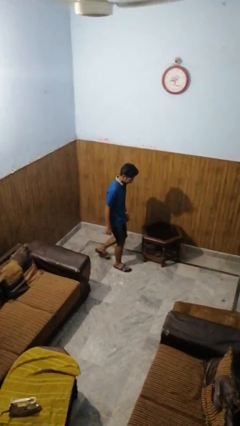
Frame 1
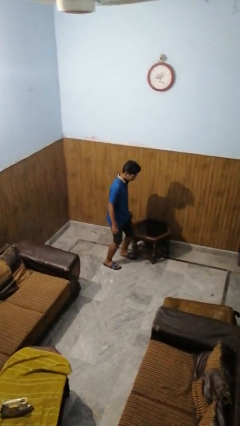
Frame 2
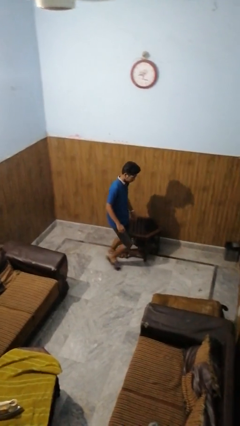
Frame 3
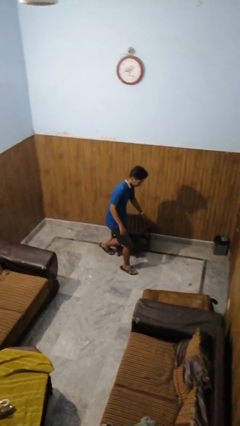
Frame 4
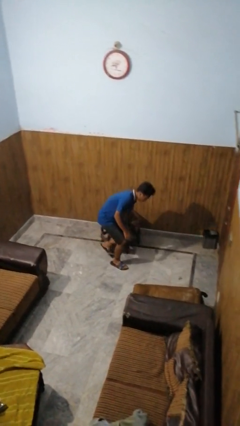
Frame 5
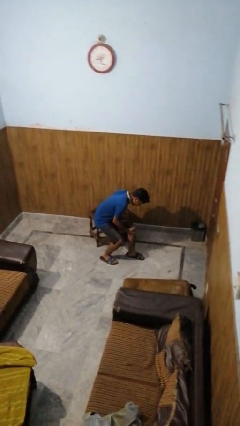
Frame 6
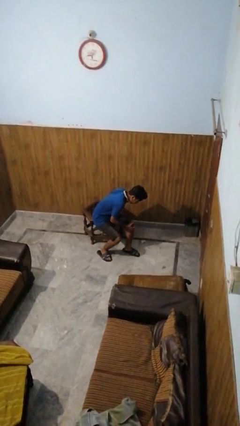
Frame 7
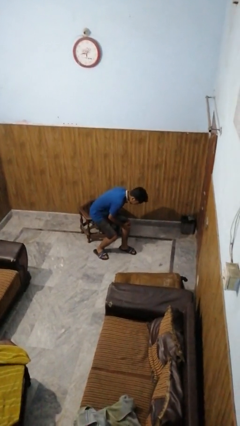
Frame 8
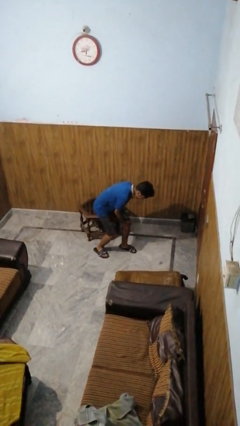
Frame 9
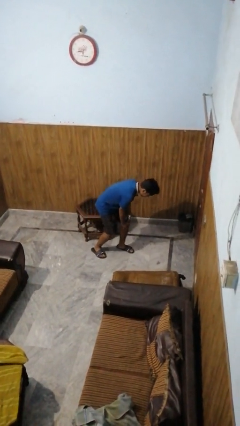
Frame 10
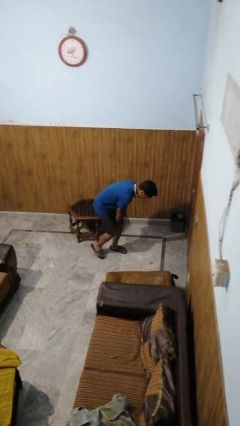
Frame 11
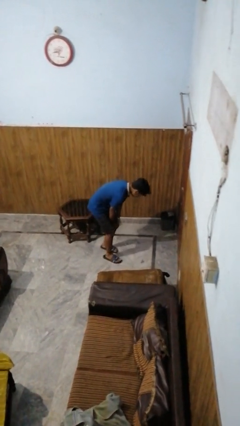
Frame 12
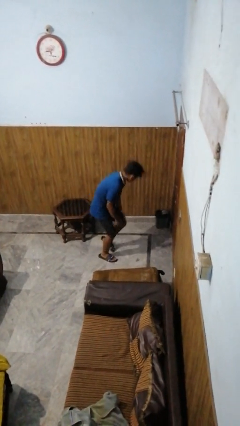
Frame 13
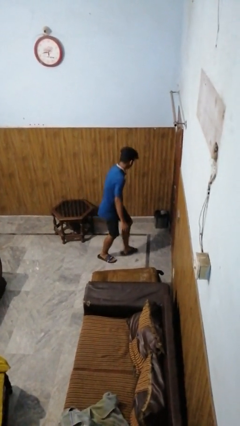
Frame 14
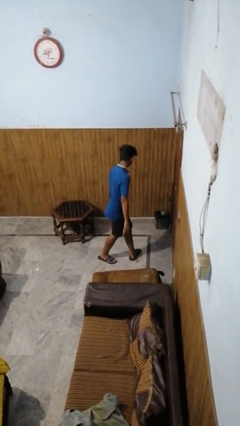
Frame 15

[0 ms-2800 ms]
person bumps into table

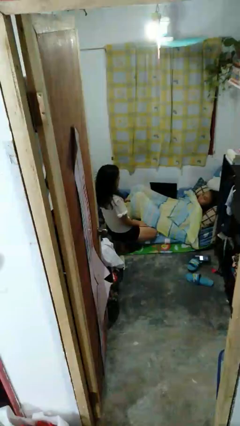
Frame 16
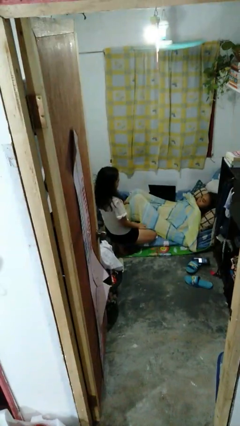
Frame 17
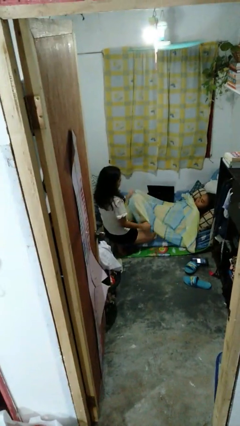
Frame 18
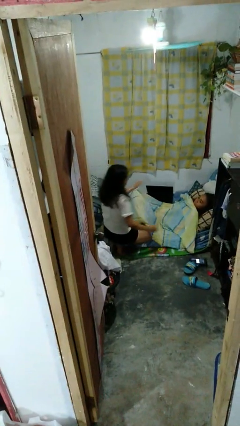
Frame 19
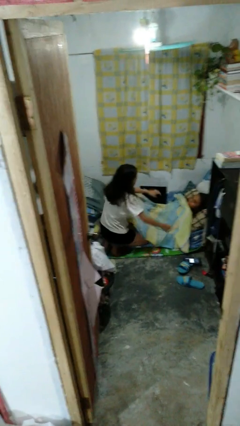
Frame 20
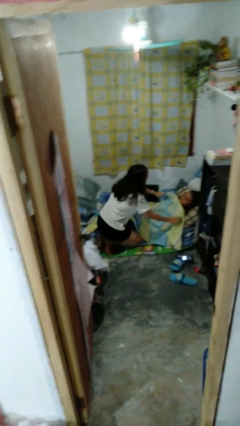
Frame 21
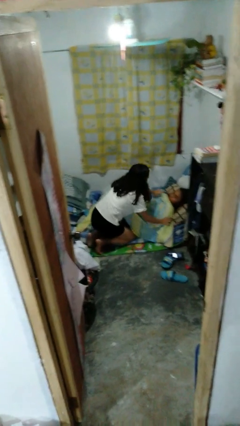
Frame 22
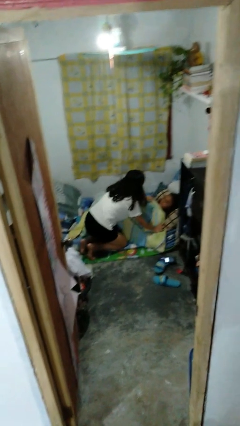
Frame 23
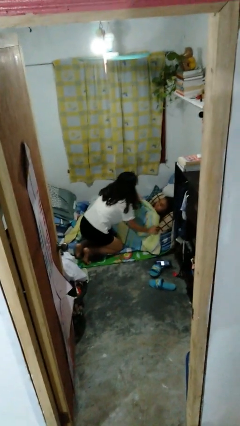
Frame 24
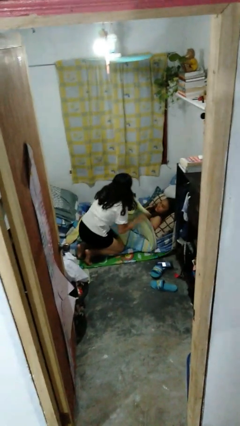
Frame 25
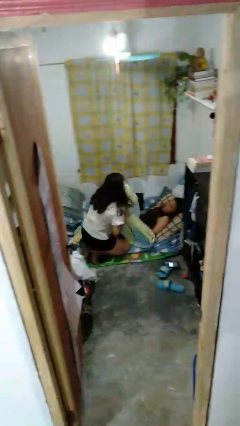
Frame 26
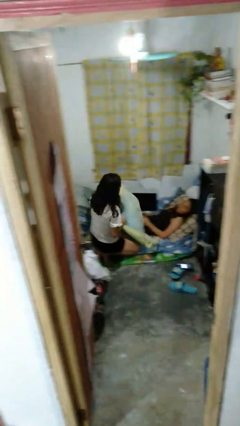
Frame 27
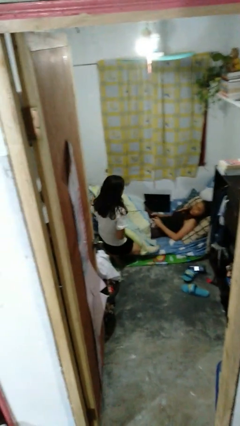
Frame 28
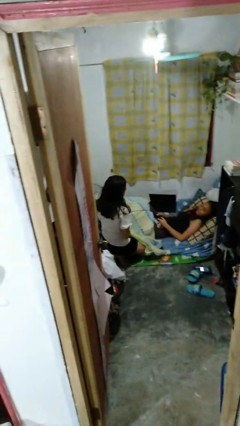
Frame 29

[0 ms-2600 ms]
person uncovers friend with blanket

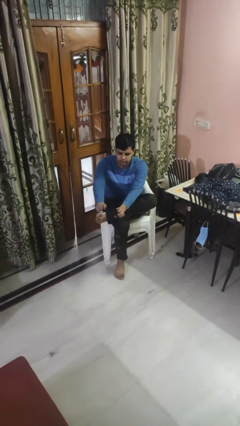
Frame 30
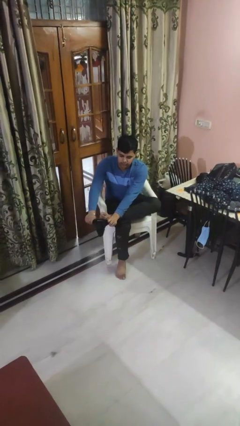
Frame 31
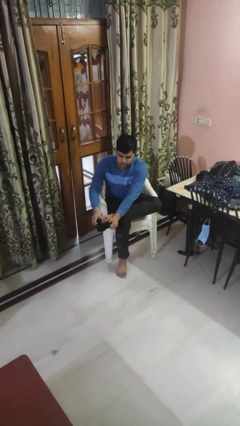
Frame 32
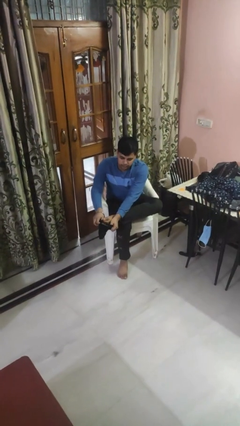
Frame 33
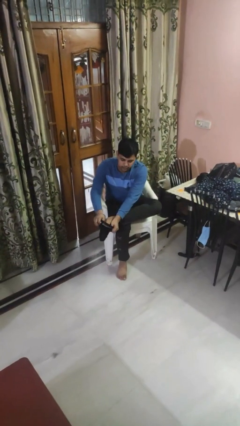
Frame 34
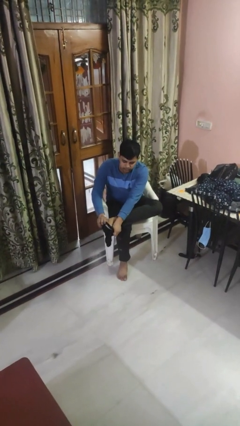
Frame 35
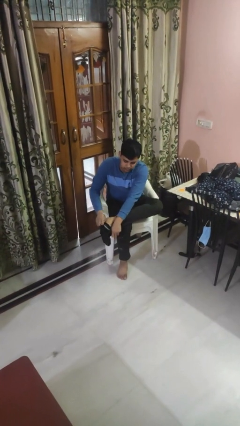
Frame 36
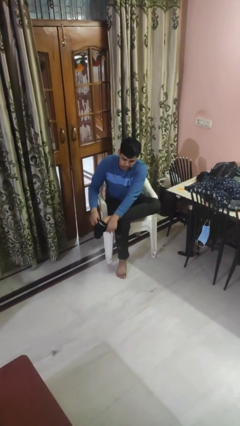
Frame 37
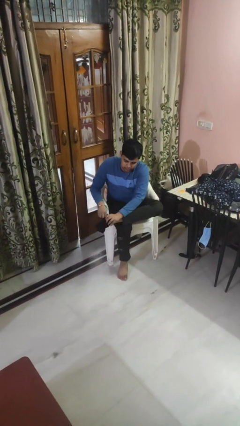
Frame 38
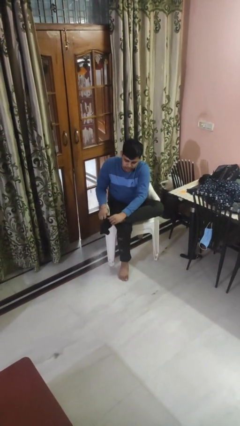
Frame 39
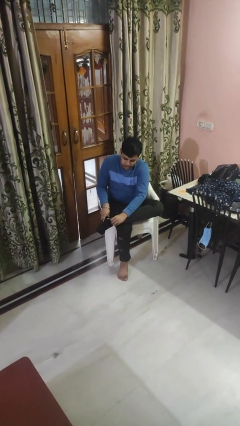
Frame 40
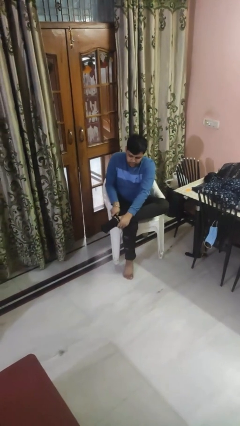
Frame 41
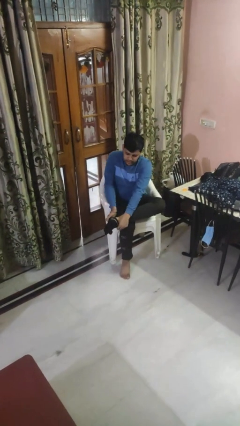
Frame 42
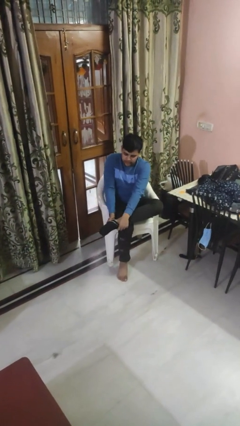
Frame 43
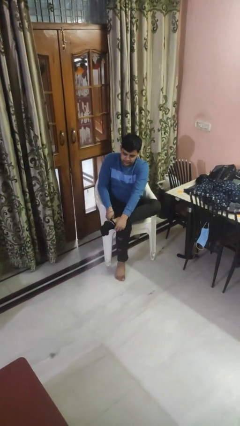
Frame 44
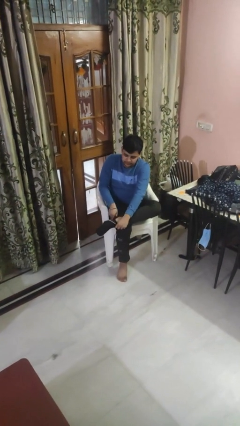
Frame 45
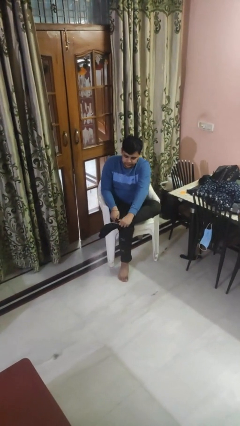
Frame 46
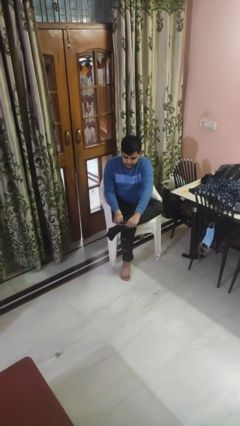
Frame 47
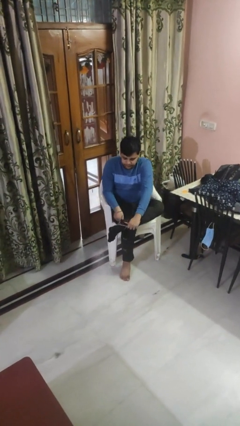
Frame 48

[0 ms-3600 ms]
person puts on socks

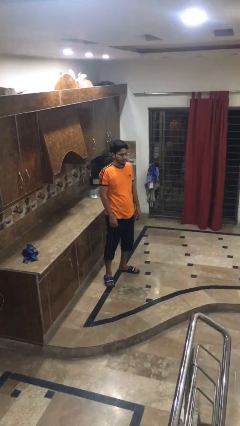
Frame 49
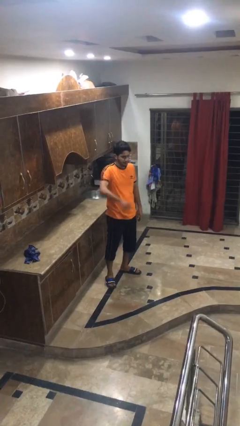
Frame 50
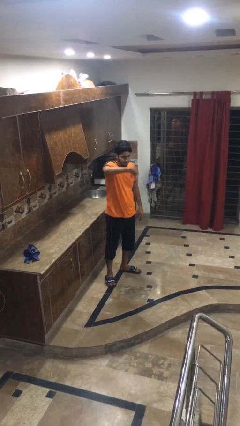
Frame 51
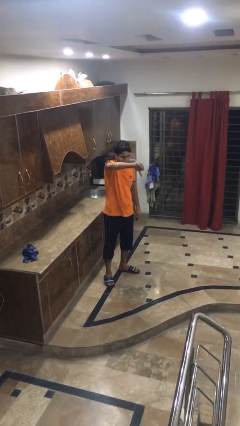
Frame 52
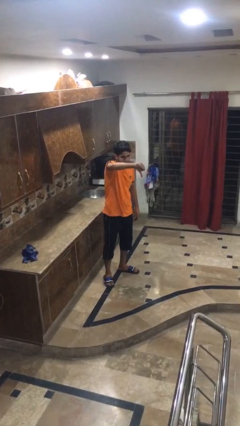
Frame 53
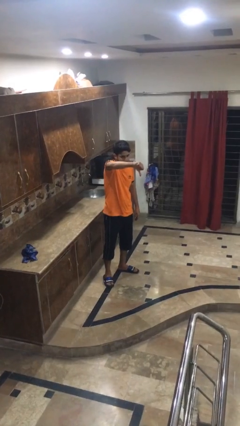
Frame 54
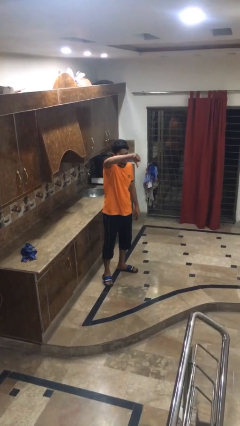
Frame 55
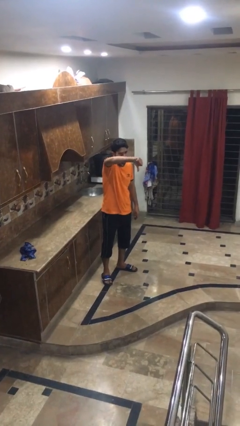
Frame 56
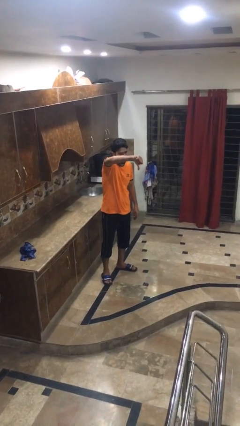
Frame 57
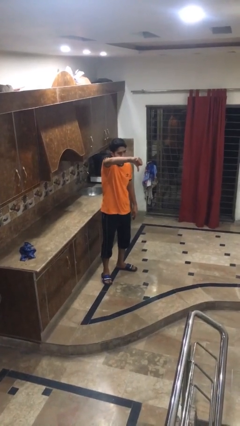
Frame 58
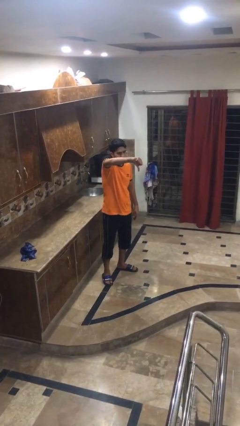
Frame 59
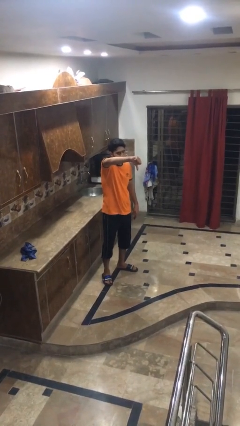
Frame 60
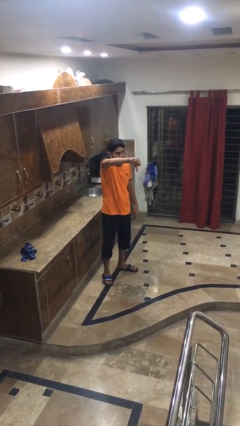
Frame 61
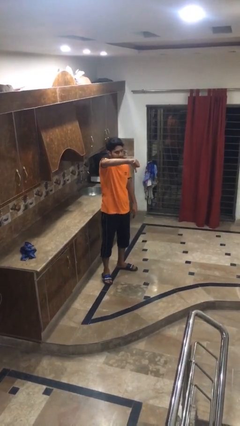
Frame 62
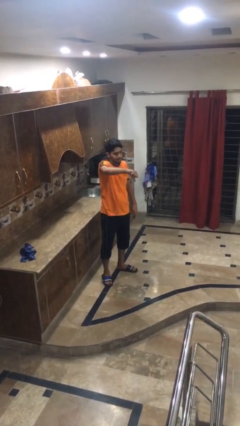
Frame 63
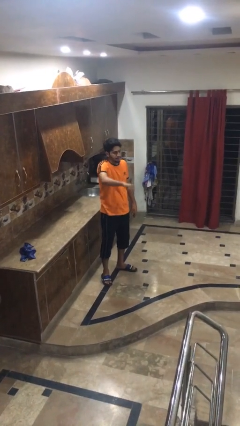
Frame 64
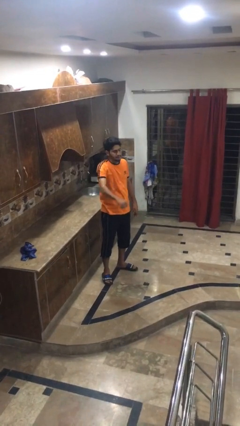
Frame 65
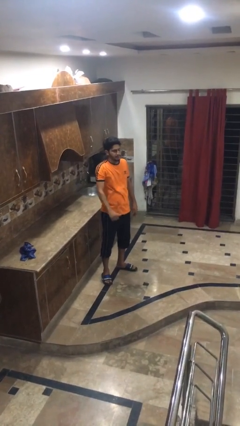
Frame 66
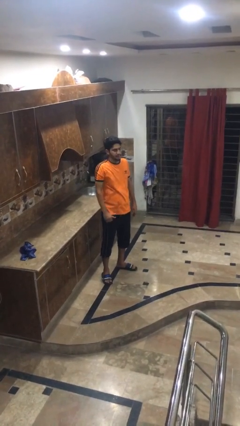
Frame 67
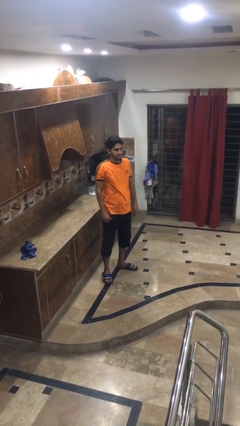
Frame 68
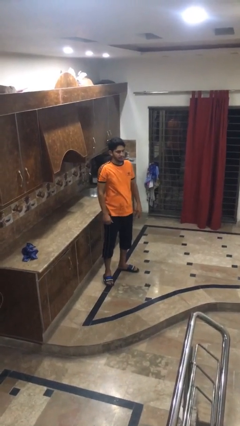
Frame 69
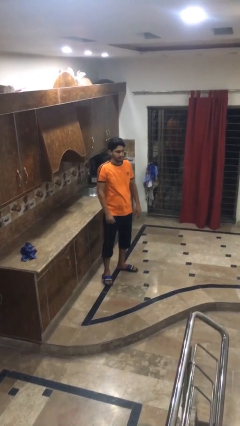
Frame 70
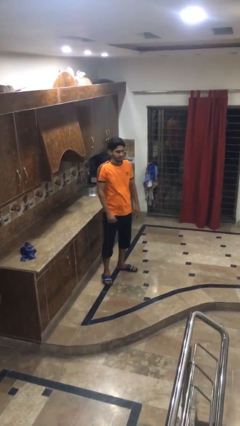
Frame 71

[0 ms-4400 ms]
person gestures thumbs down

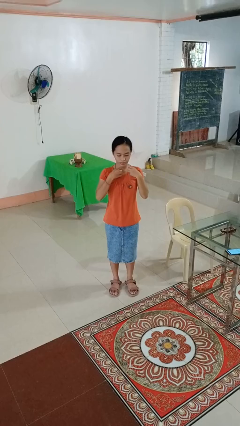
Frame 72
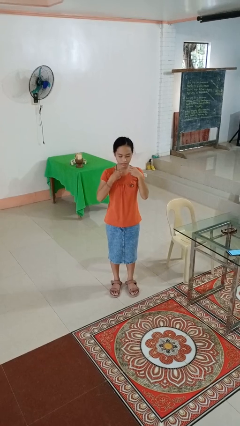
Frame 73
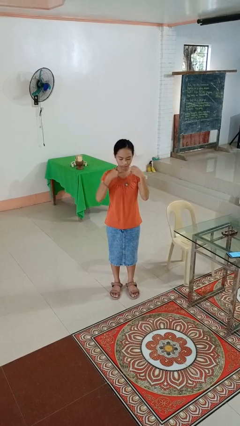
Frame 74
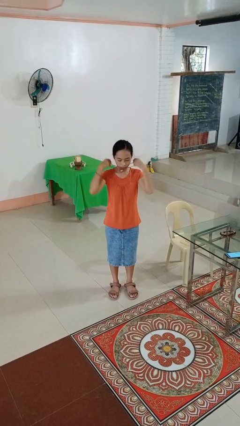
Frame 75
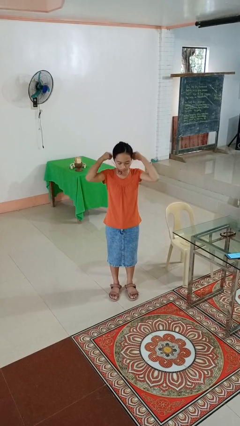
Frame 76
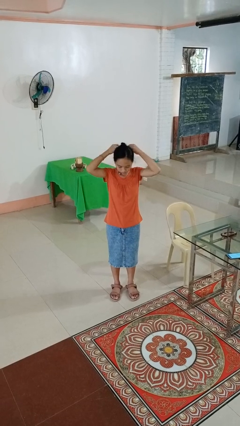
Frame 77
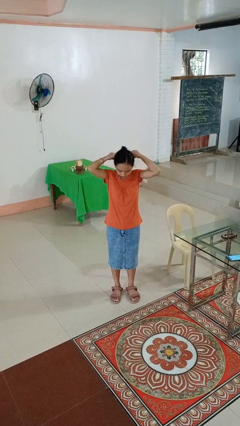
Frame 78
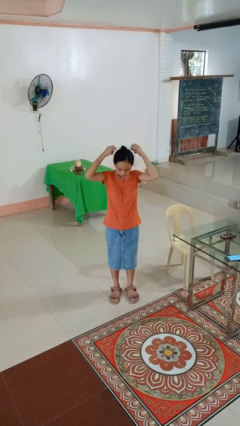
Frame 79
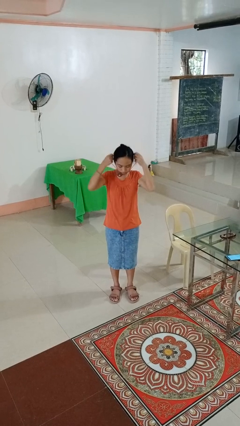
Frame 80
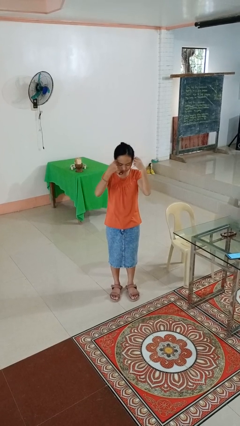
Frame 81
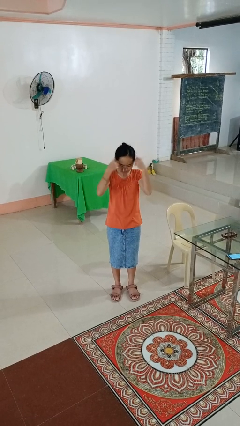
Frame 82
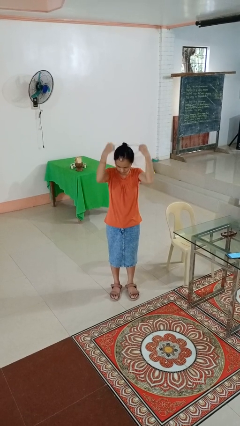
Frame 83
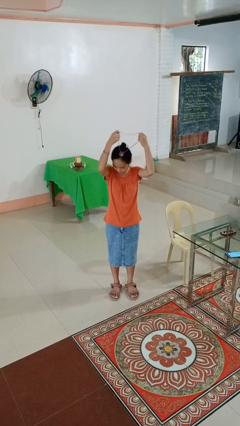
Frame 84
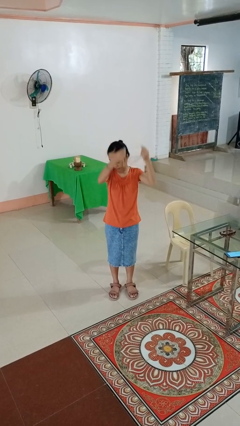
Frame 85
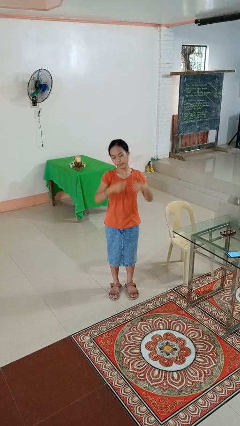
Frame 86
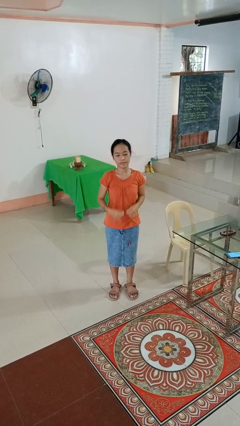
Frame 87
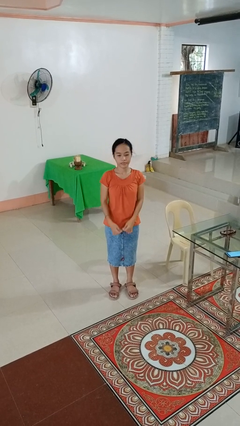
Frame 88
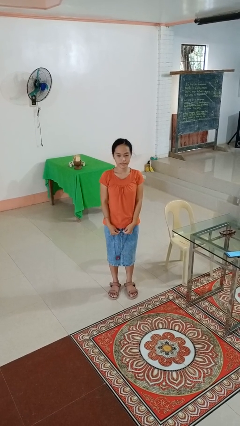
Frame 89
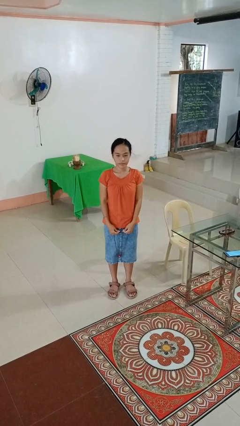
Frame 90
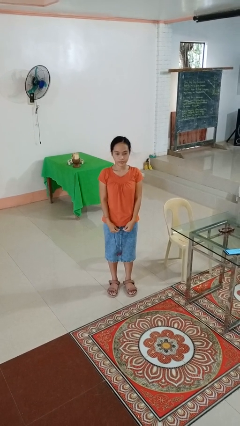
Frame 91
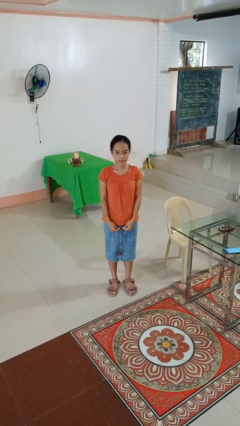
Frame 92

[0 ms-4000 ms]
person takes off necklace

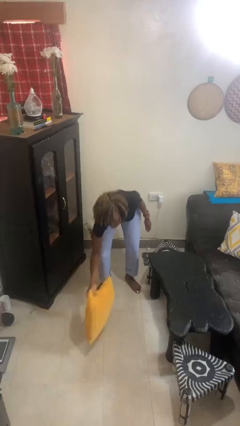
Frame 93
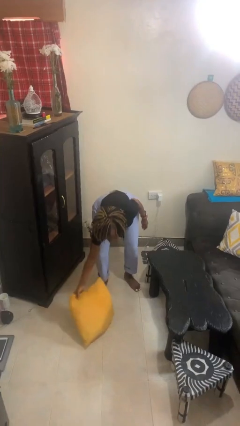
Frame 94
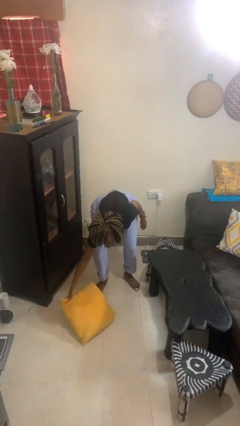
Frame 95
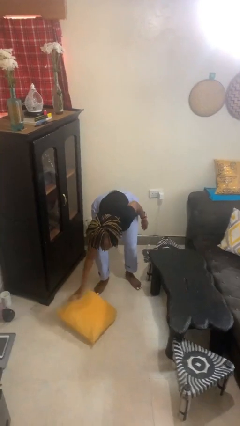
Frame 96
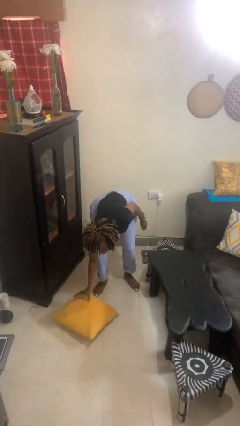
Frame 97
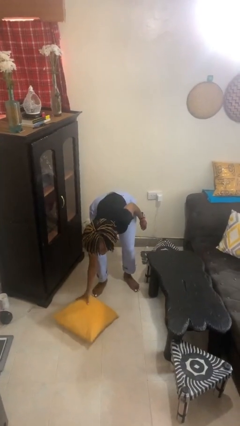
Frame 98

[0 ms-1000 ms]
person catches dropped object
